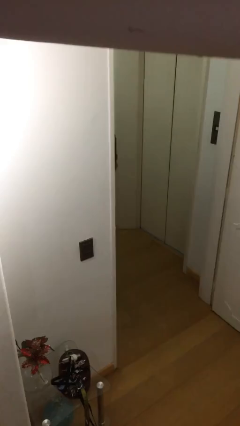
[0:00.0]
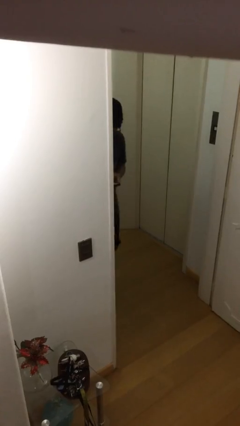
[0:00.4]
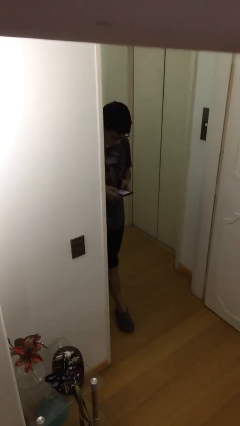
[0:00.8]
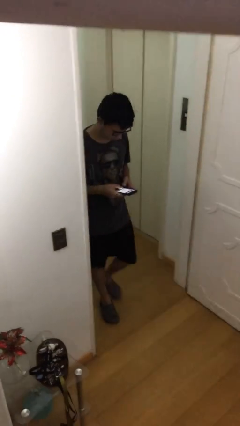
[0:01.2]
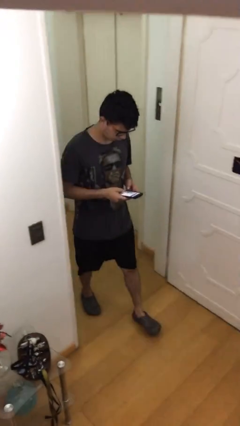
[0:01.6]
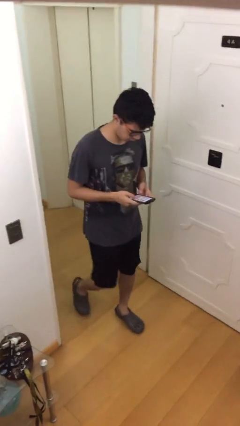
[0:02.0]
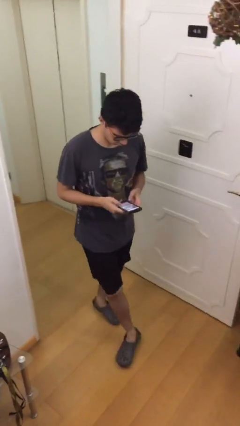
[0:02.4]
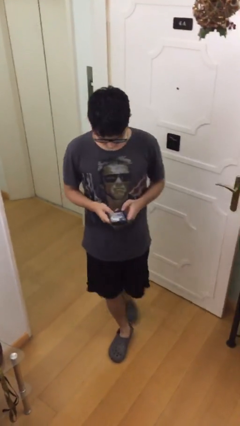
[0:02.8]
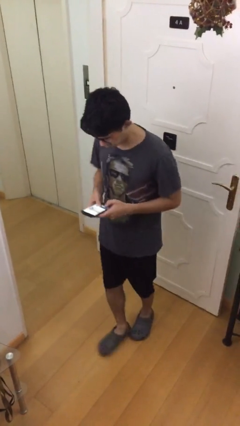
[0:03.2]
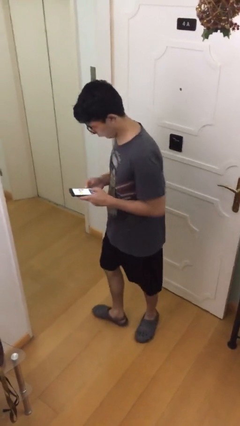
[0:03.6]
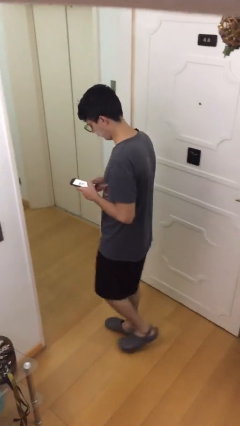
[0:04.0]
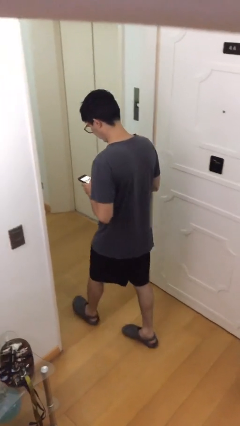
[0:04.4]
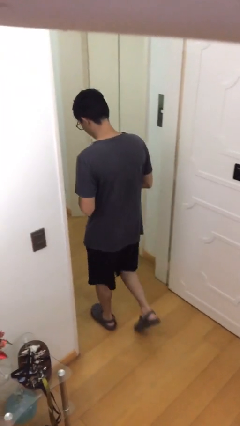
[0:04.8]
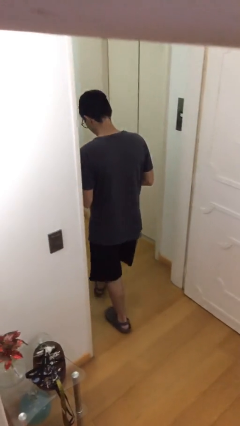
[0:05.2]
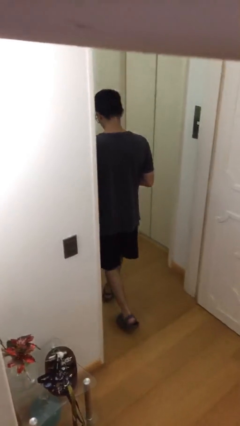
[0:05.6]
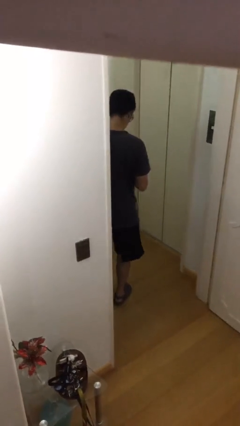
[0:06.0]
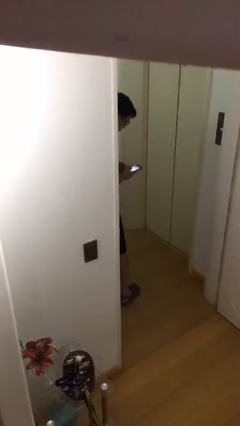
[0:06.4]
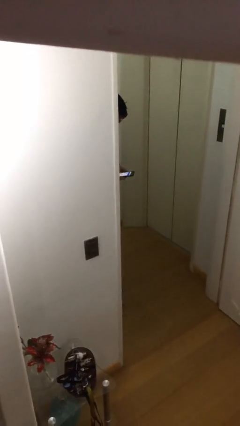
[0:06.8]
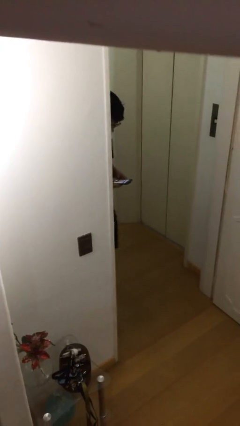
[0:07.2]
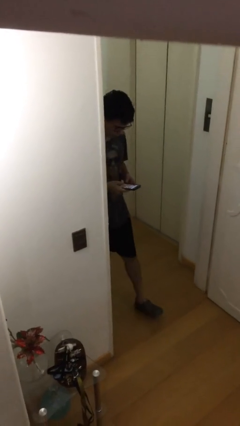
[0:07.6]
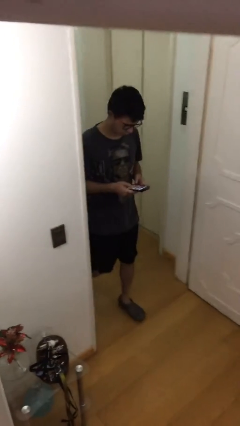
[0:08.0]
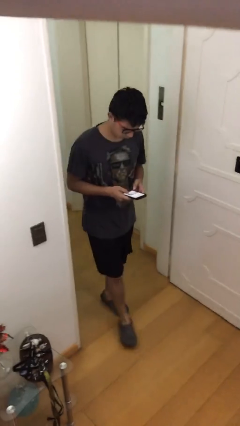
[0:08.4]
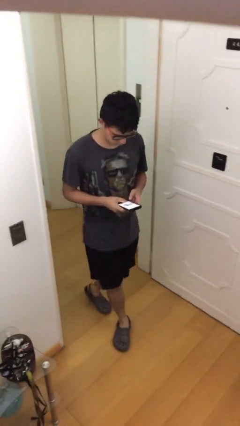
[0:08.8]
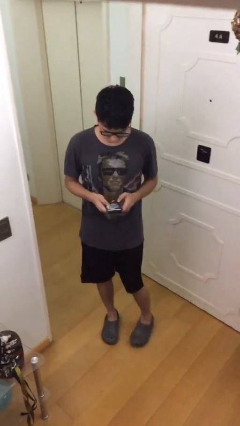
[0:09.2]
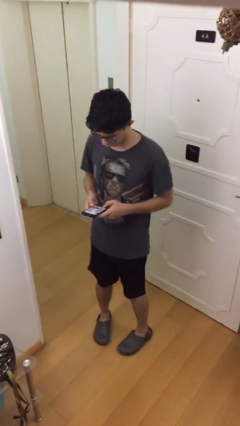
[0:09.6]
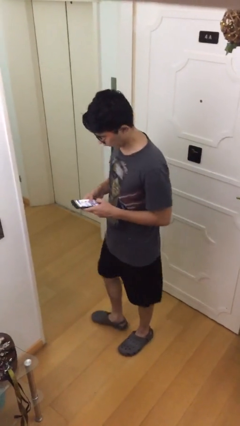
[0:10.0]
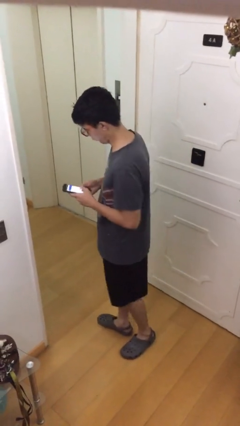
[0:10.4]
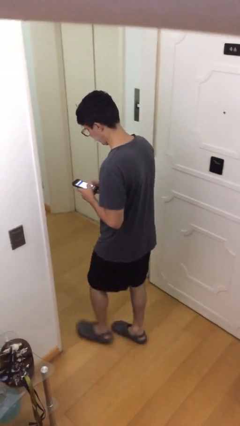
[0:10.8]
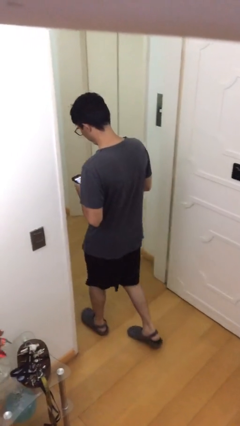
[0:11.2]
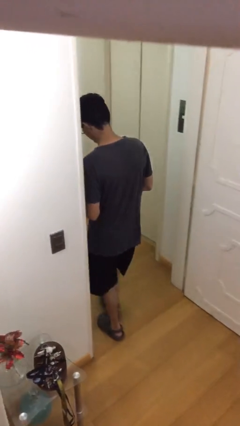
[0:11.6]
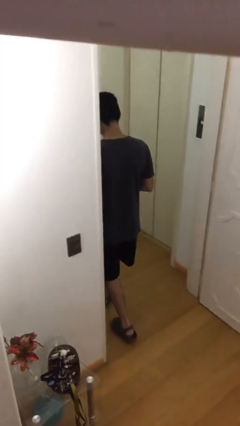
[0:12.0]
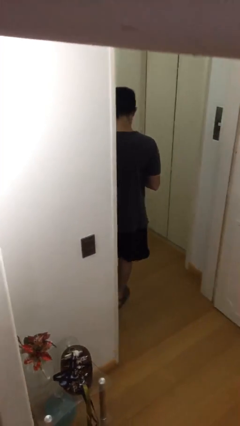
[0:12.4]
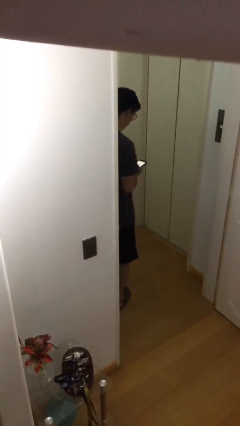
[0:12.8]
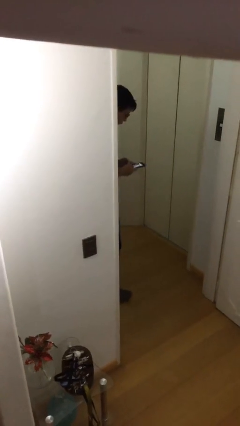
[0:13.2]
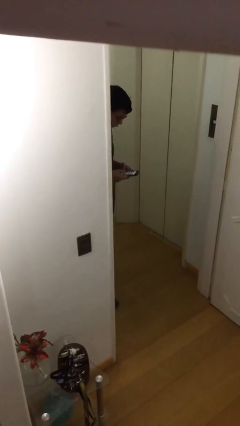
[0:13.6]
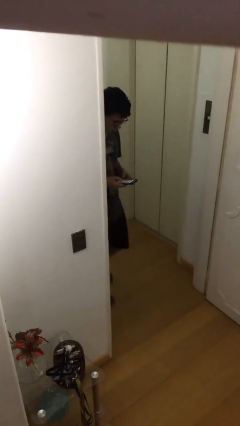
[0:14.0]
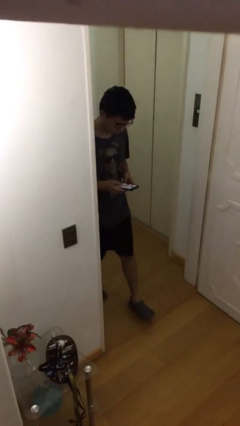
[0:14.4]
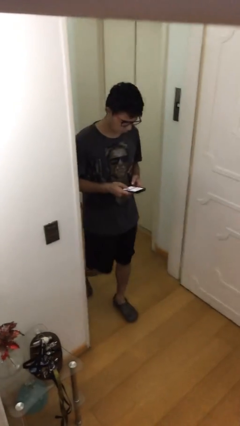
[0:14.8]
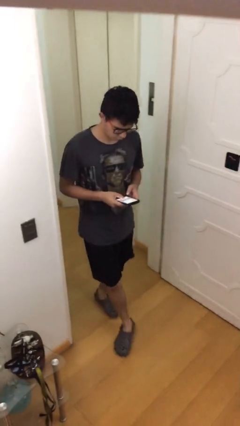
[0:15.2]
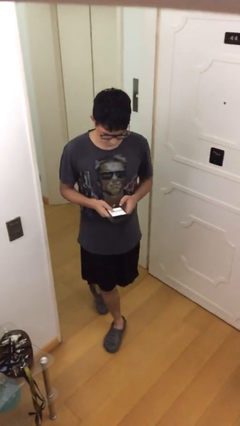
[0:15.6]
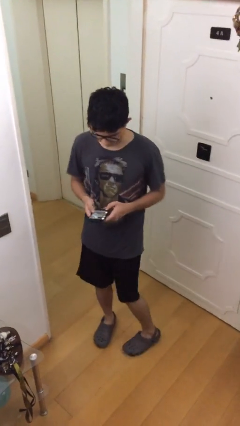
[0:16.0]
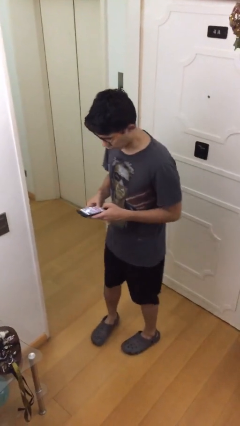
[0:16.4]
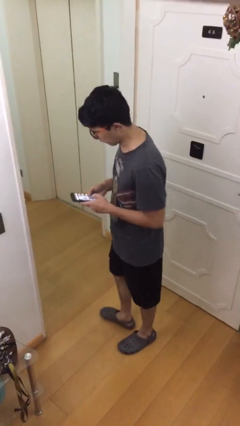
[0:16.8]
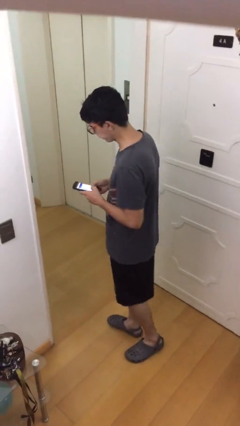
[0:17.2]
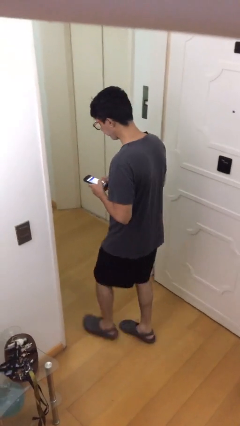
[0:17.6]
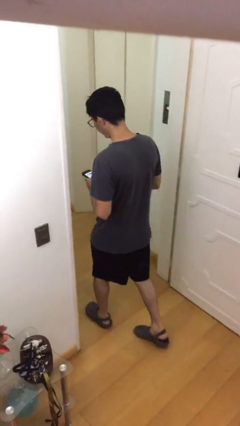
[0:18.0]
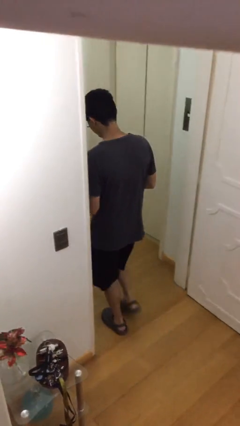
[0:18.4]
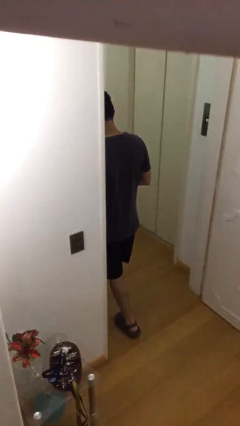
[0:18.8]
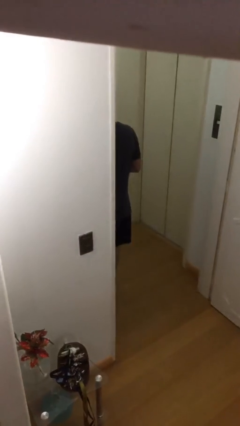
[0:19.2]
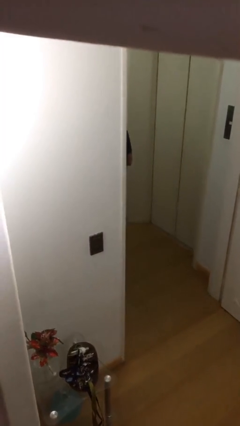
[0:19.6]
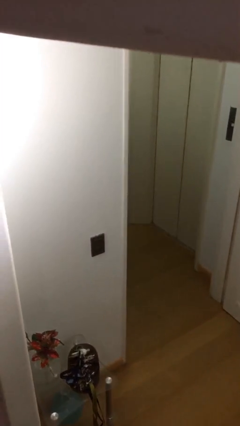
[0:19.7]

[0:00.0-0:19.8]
person texts on phone

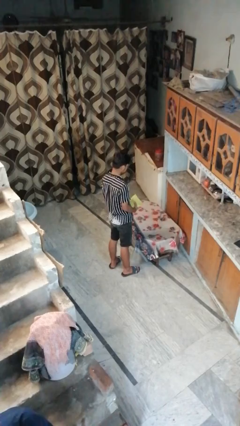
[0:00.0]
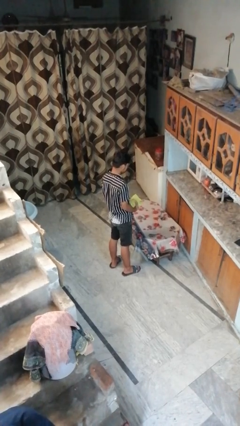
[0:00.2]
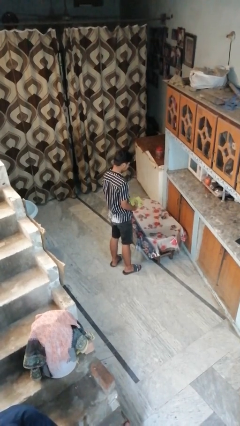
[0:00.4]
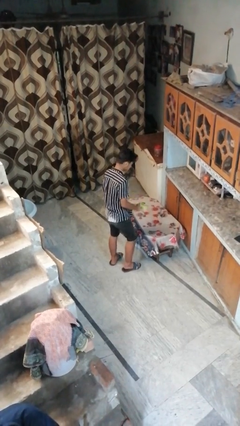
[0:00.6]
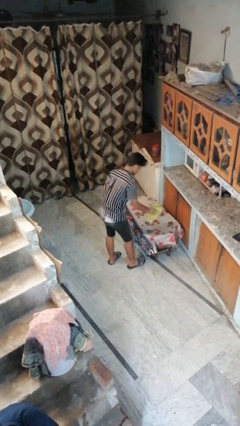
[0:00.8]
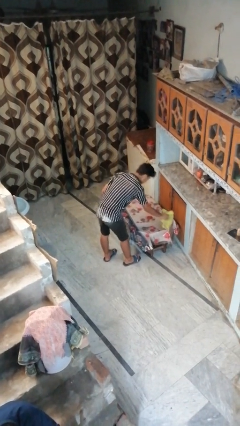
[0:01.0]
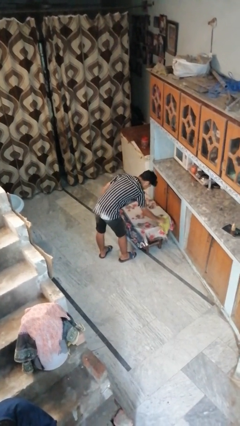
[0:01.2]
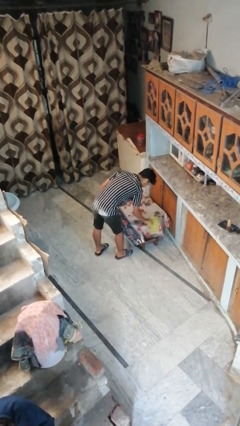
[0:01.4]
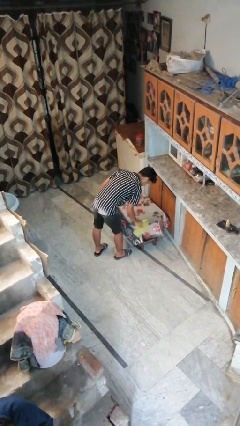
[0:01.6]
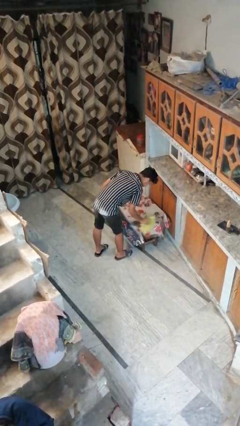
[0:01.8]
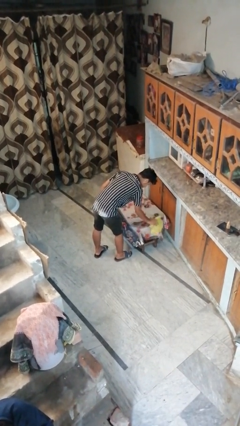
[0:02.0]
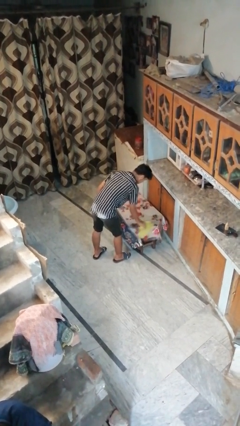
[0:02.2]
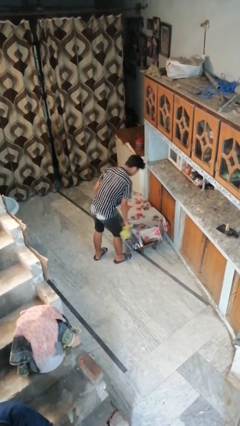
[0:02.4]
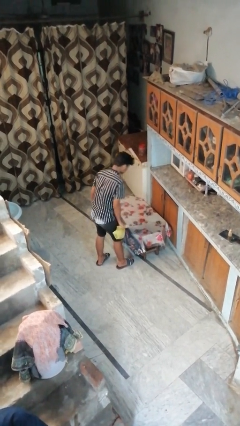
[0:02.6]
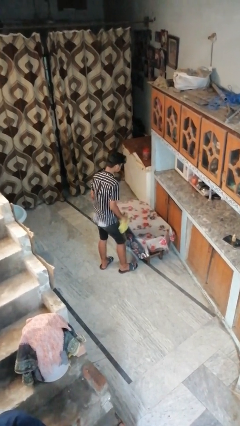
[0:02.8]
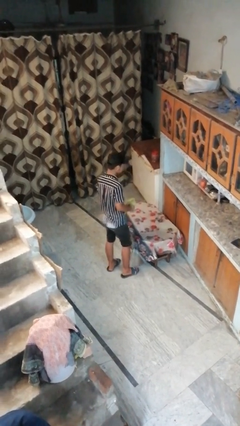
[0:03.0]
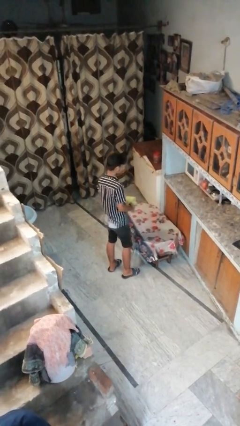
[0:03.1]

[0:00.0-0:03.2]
person cleans table with rag

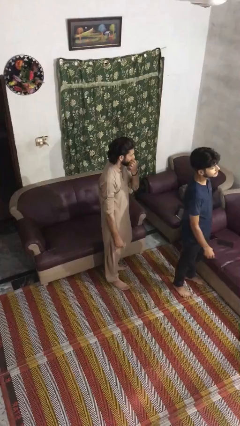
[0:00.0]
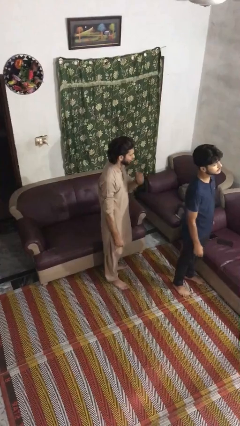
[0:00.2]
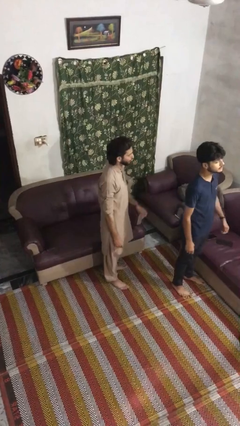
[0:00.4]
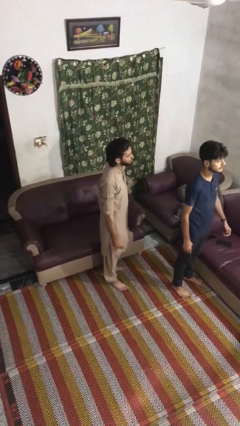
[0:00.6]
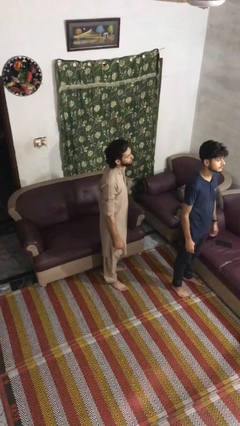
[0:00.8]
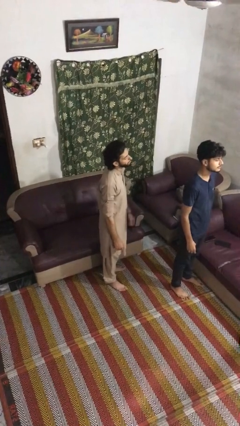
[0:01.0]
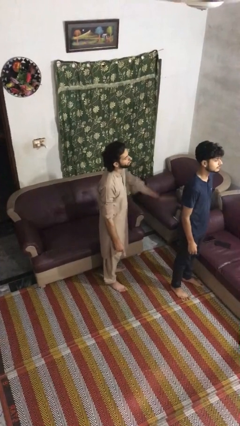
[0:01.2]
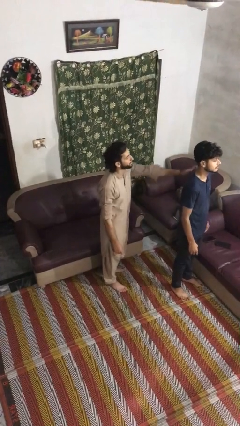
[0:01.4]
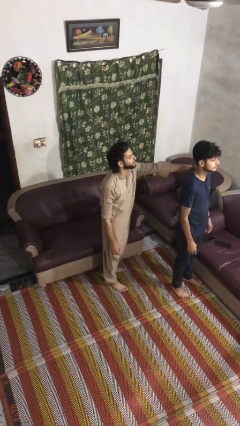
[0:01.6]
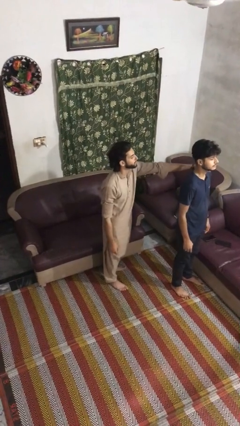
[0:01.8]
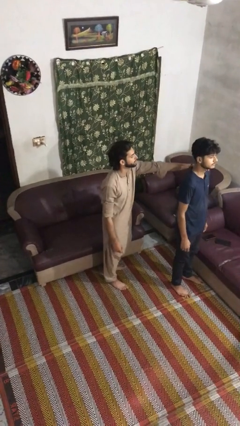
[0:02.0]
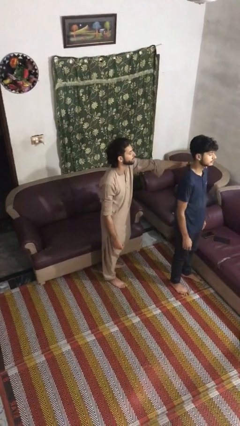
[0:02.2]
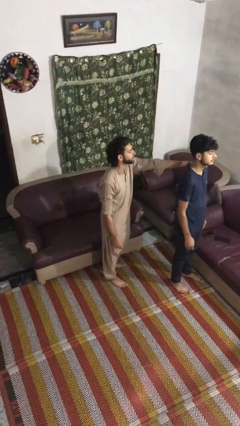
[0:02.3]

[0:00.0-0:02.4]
person grabs person by shoulder

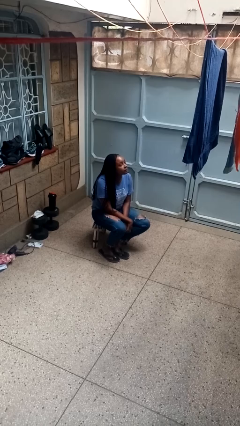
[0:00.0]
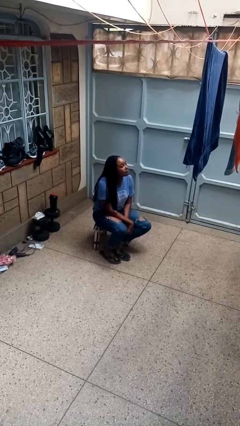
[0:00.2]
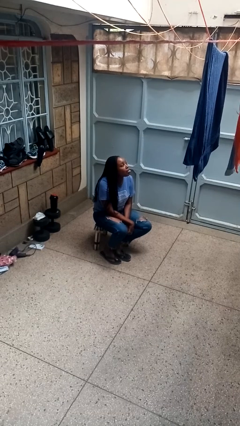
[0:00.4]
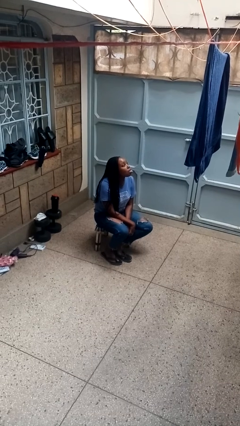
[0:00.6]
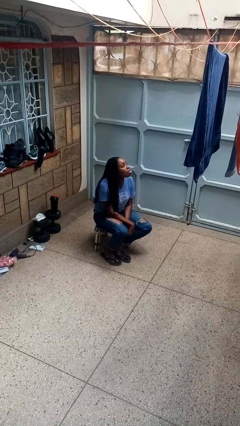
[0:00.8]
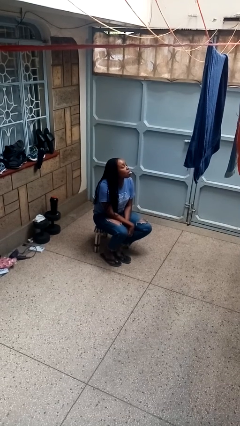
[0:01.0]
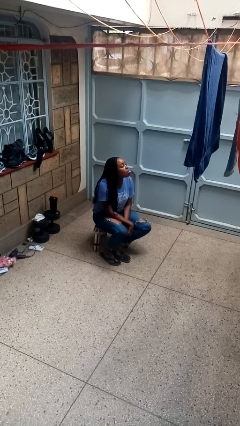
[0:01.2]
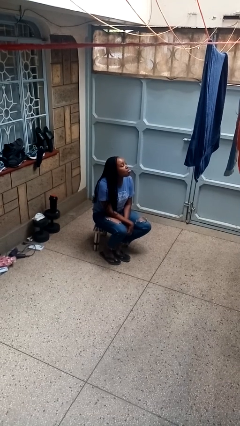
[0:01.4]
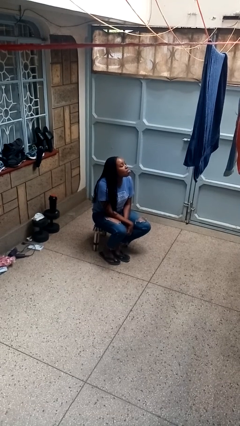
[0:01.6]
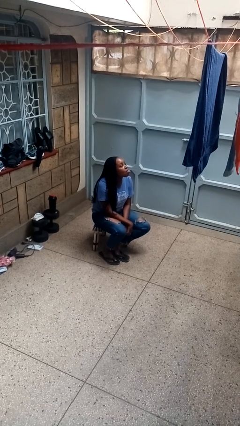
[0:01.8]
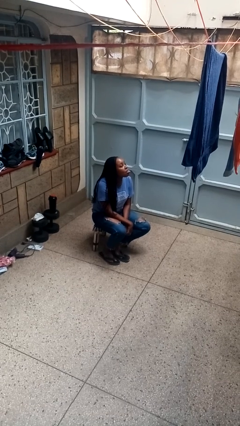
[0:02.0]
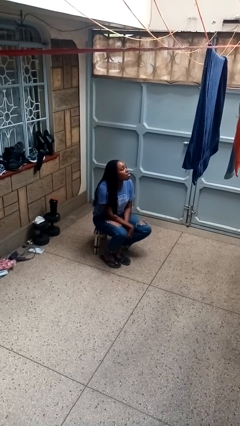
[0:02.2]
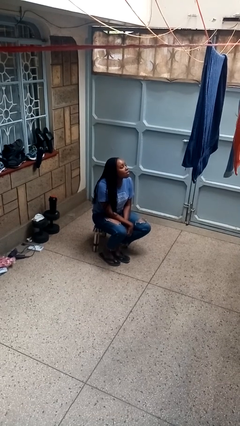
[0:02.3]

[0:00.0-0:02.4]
person sticks out tongue
